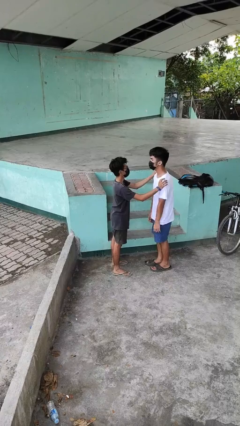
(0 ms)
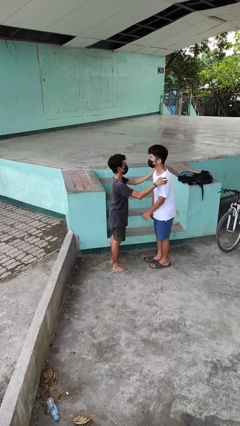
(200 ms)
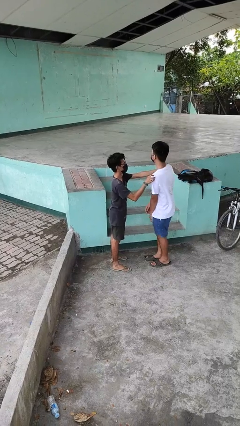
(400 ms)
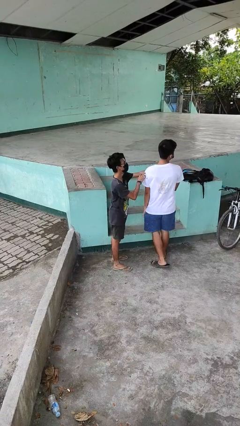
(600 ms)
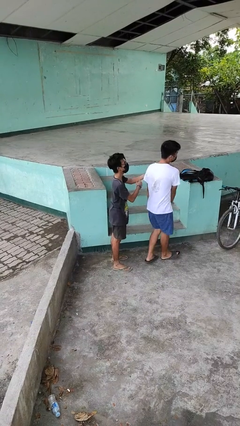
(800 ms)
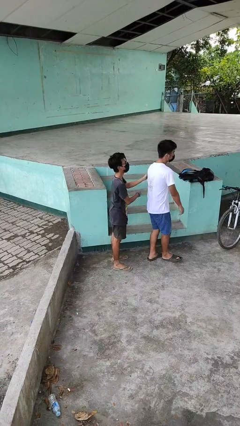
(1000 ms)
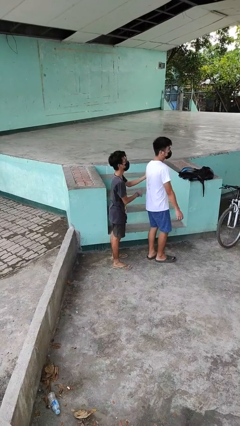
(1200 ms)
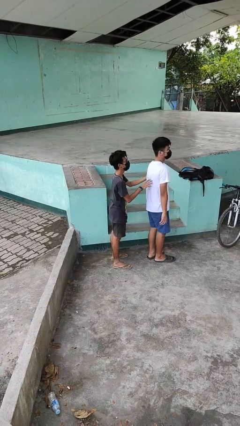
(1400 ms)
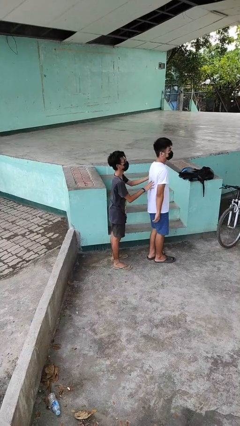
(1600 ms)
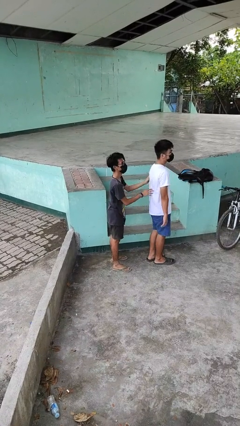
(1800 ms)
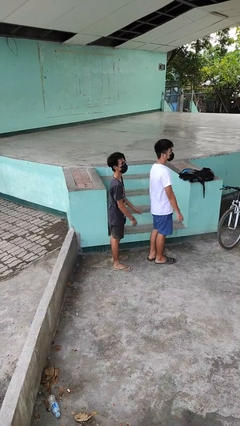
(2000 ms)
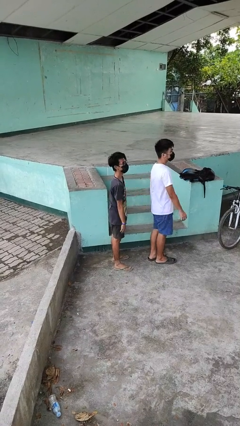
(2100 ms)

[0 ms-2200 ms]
person spins person around

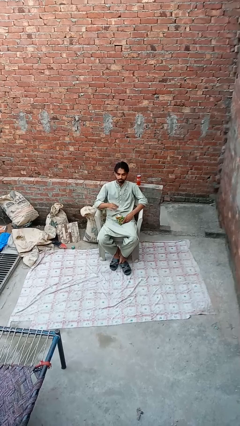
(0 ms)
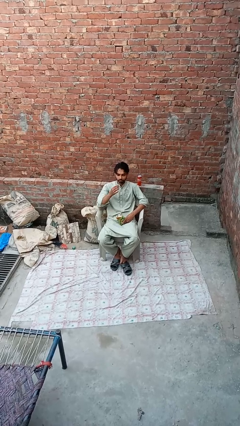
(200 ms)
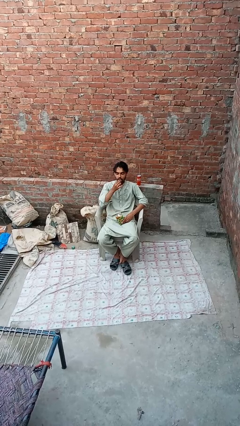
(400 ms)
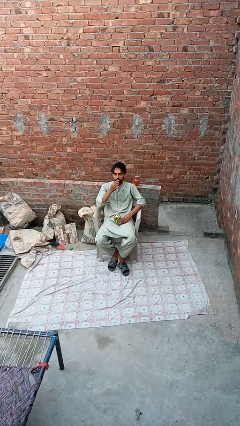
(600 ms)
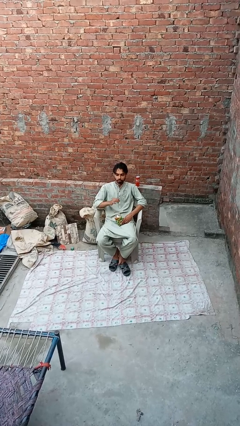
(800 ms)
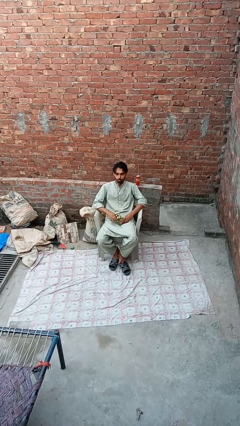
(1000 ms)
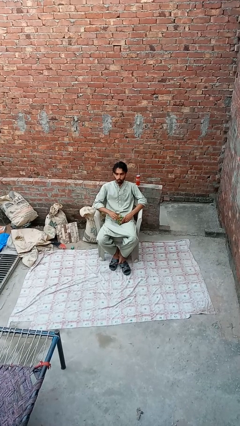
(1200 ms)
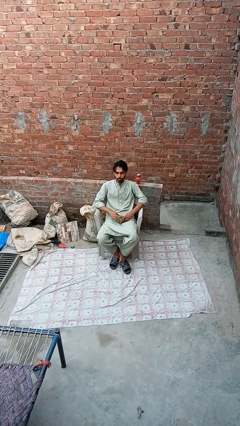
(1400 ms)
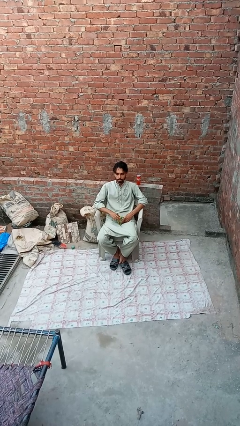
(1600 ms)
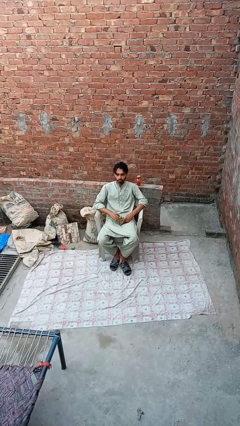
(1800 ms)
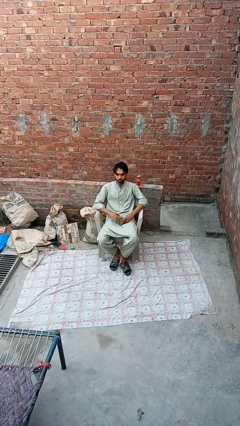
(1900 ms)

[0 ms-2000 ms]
person eats snack from bag

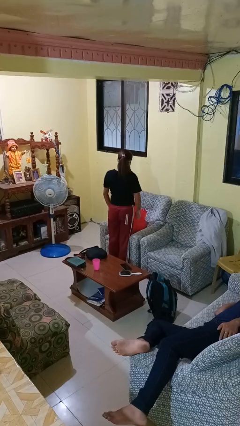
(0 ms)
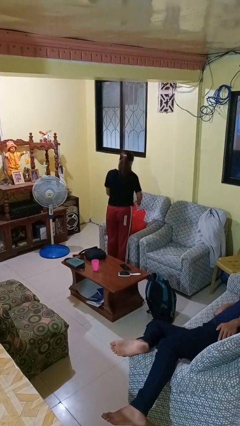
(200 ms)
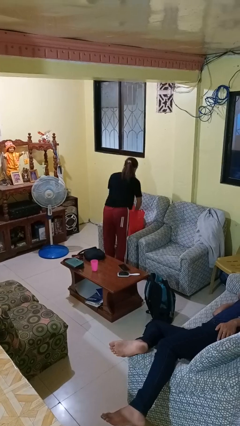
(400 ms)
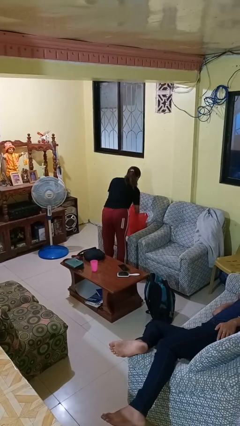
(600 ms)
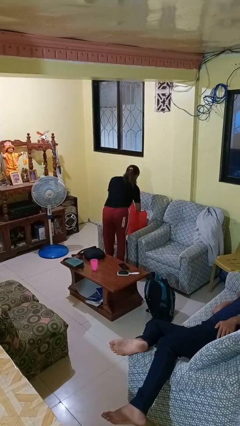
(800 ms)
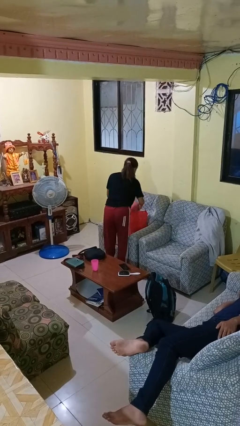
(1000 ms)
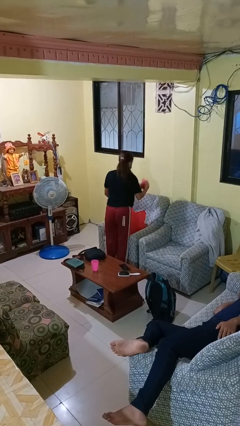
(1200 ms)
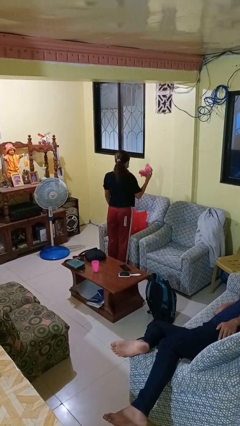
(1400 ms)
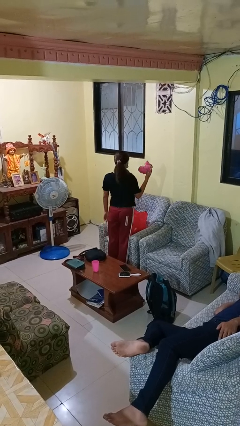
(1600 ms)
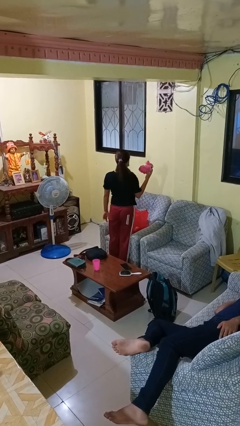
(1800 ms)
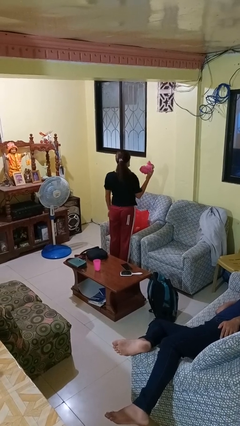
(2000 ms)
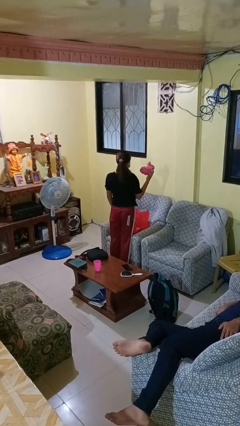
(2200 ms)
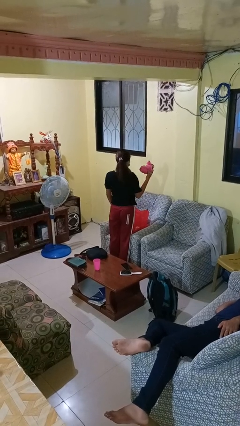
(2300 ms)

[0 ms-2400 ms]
person takes object from bag

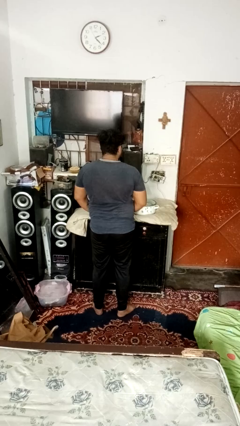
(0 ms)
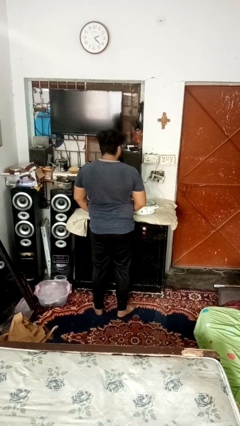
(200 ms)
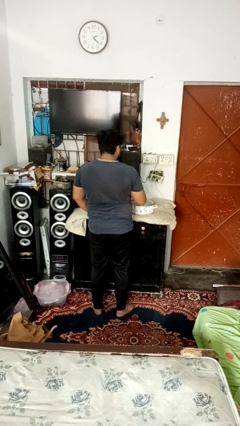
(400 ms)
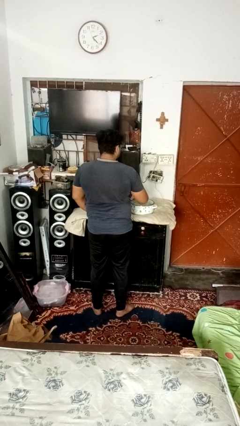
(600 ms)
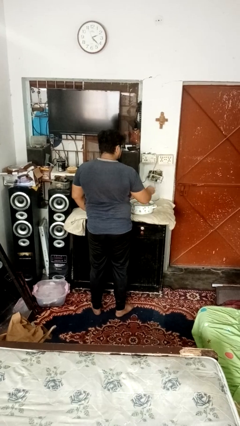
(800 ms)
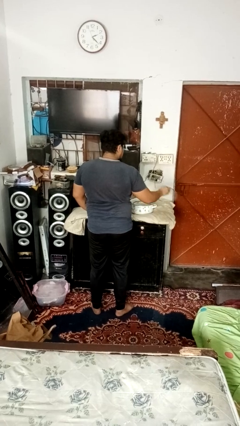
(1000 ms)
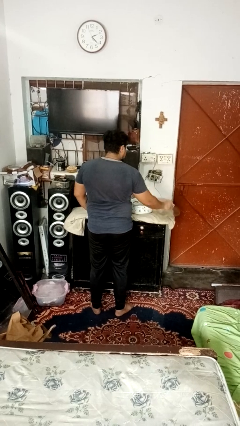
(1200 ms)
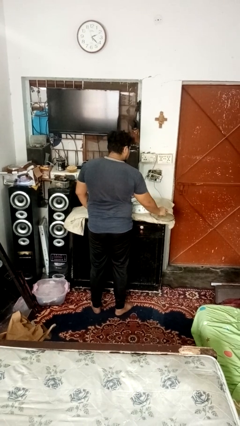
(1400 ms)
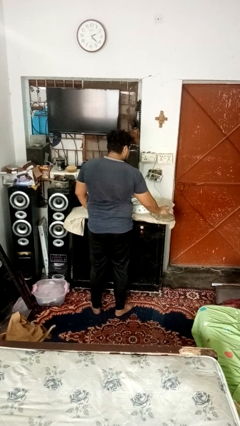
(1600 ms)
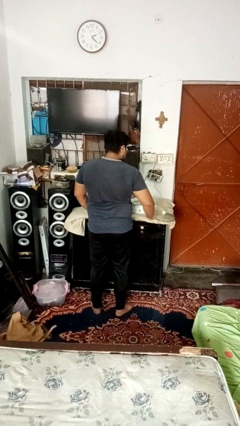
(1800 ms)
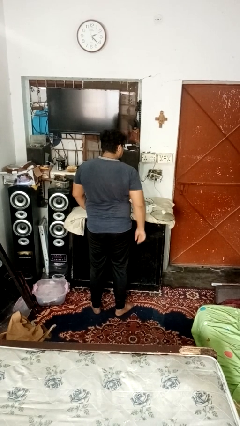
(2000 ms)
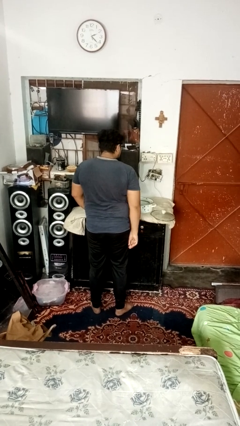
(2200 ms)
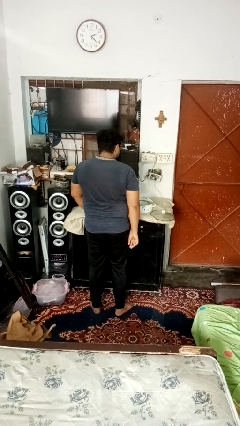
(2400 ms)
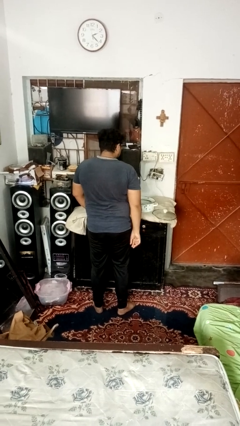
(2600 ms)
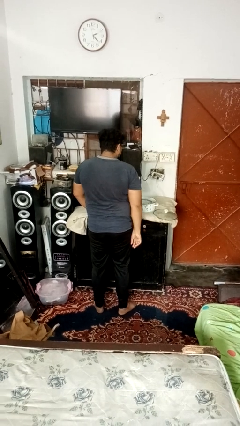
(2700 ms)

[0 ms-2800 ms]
person opens jar

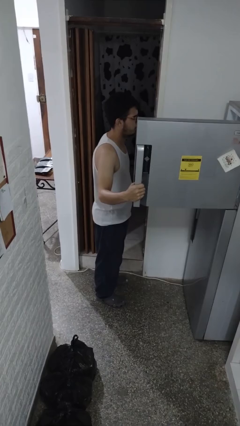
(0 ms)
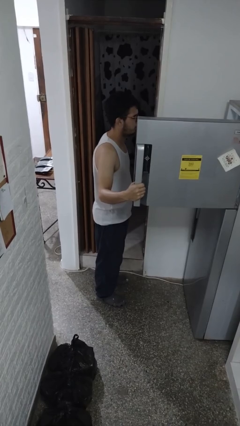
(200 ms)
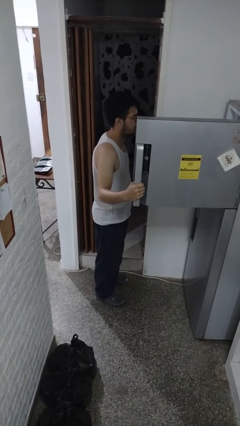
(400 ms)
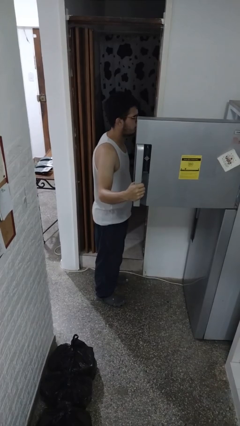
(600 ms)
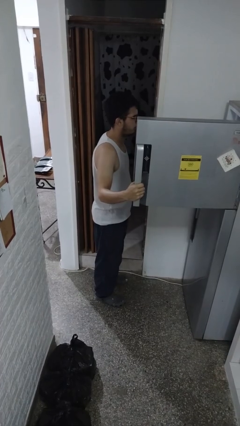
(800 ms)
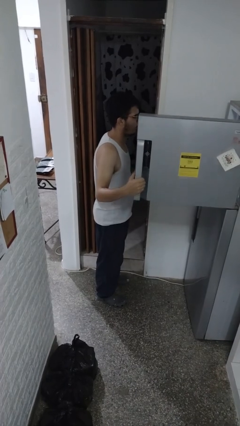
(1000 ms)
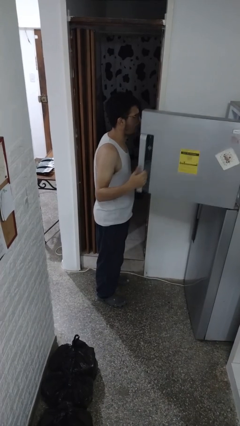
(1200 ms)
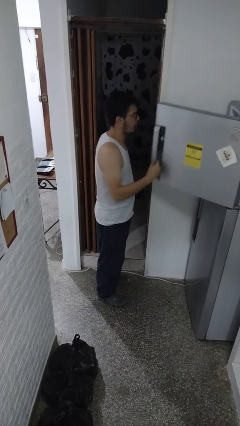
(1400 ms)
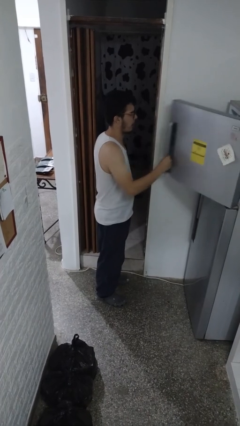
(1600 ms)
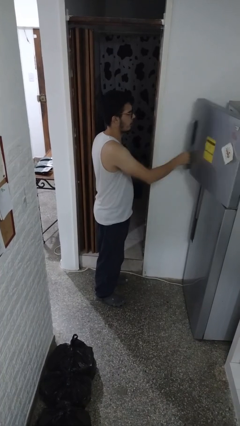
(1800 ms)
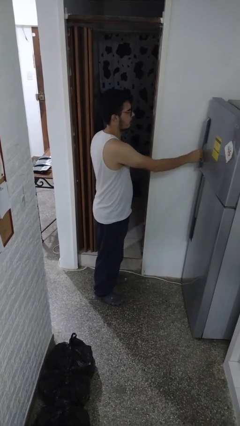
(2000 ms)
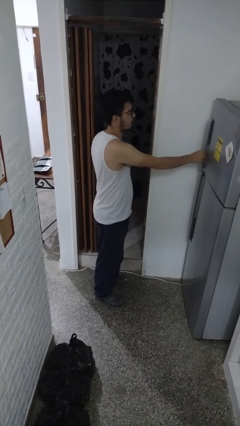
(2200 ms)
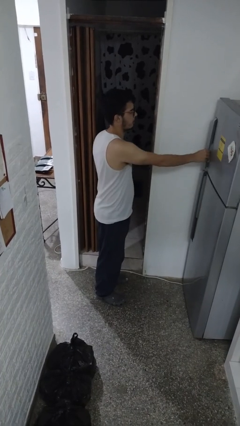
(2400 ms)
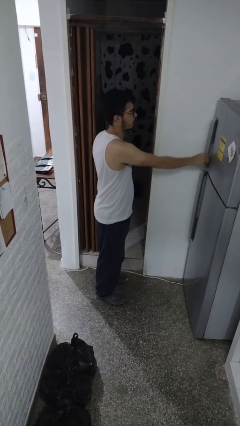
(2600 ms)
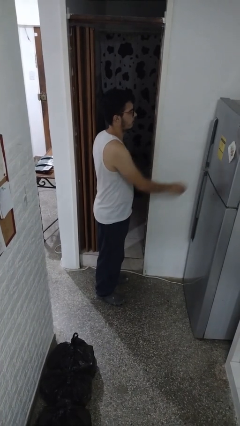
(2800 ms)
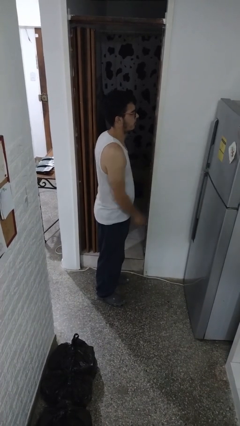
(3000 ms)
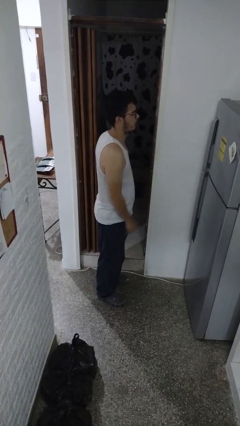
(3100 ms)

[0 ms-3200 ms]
person closes refrigerator

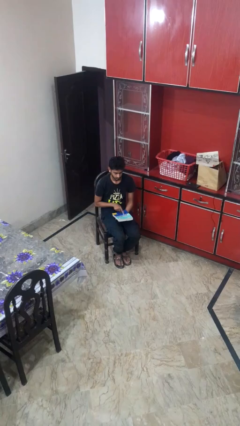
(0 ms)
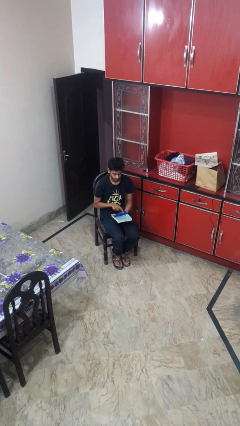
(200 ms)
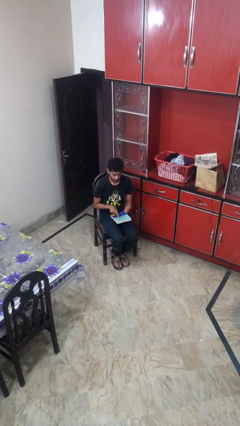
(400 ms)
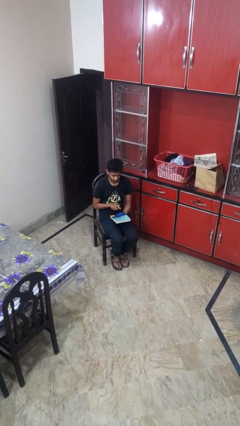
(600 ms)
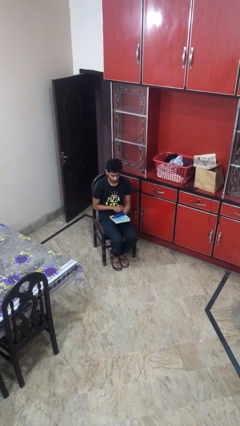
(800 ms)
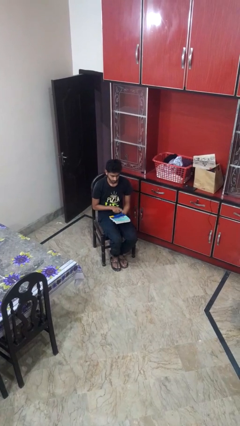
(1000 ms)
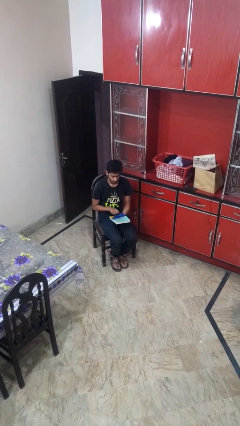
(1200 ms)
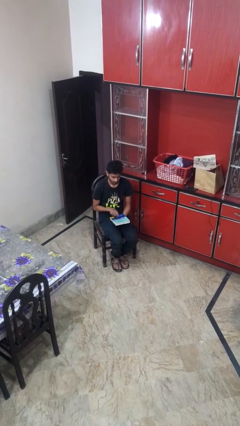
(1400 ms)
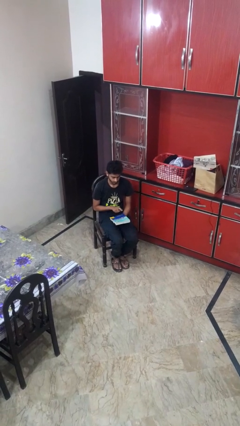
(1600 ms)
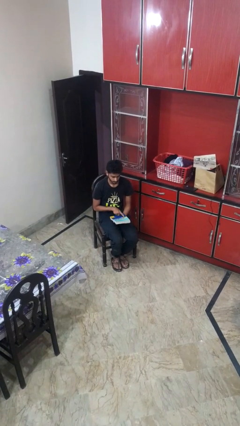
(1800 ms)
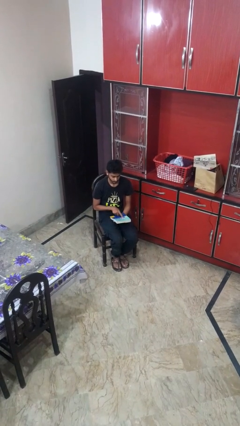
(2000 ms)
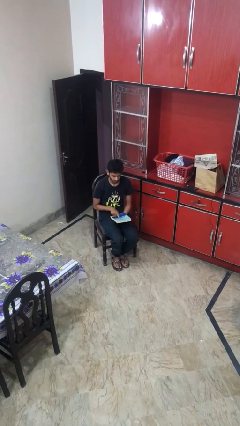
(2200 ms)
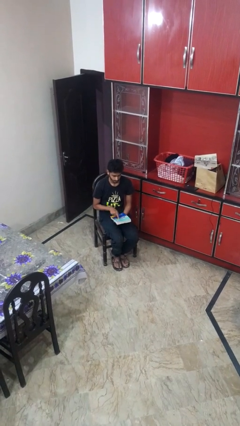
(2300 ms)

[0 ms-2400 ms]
person taps object with finger

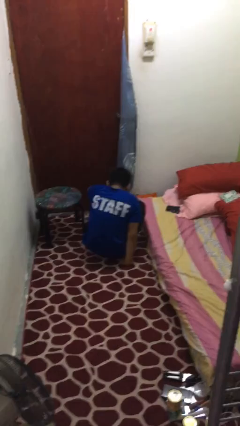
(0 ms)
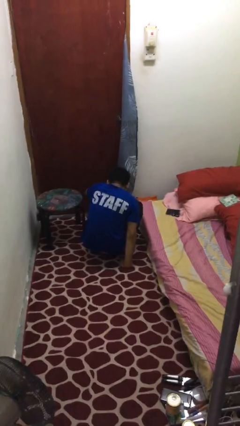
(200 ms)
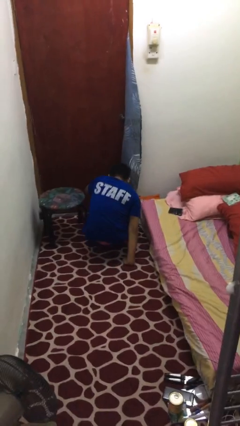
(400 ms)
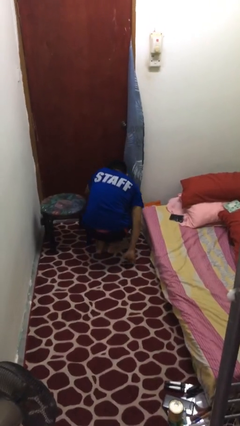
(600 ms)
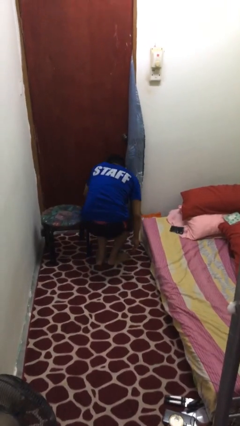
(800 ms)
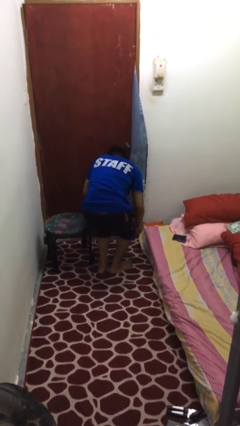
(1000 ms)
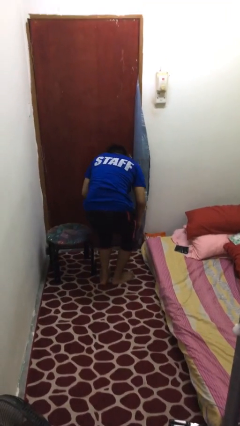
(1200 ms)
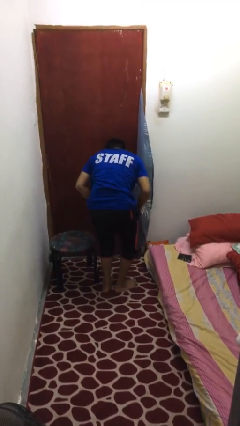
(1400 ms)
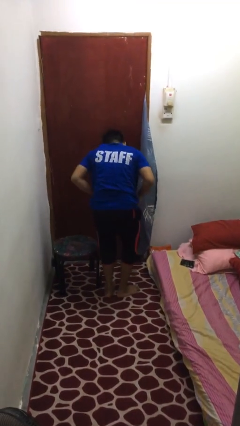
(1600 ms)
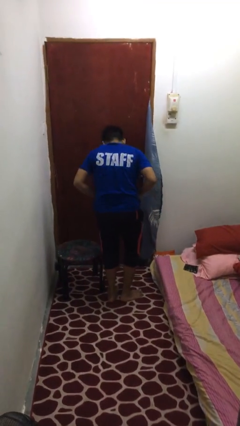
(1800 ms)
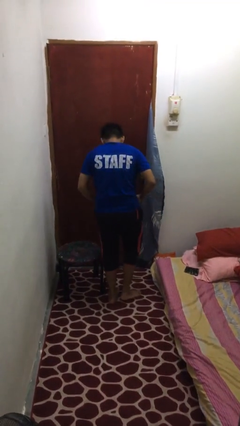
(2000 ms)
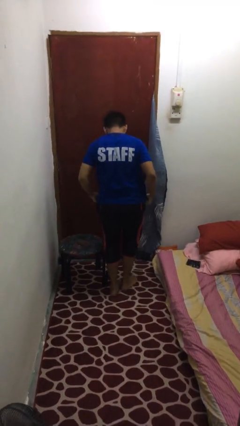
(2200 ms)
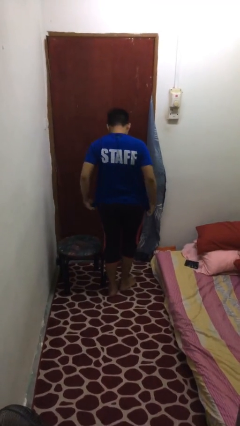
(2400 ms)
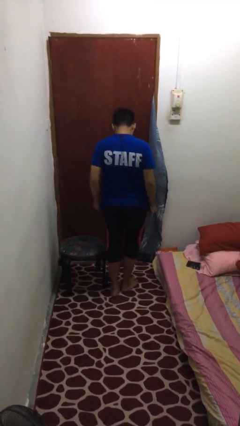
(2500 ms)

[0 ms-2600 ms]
person stands up from floor
